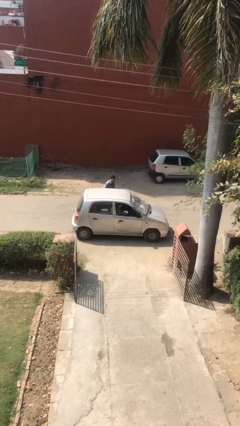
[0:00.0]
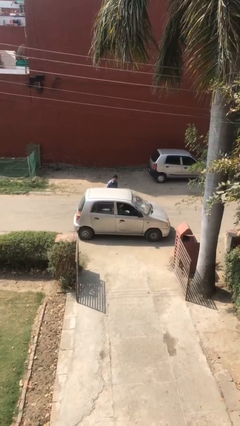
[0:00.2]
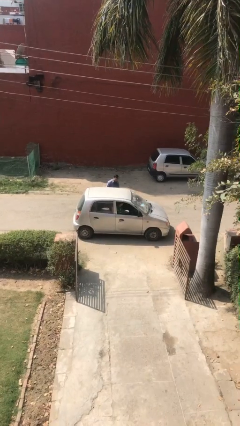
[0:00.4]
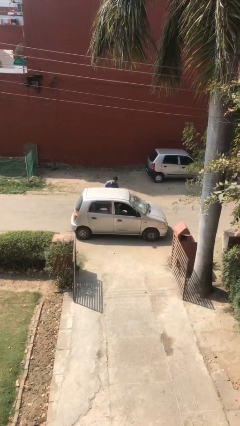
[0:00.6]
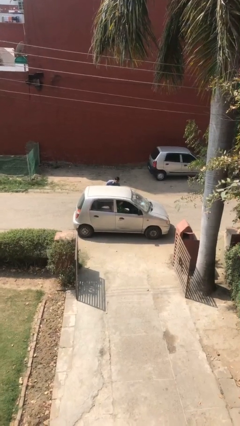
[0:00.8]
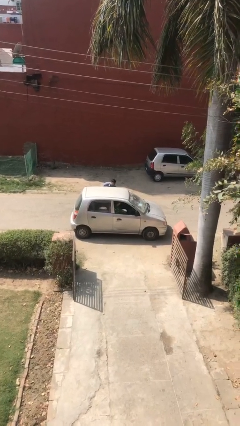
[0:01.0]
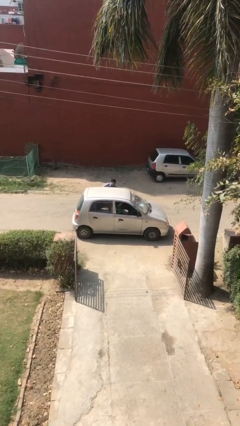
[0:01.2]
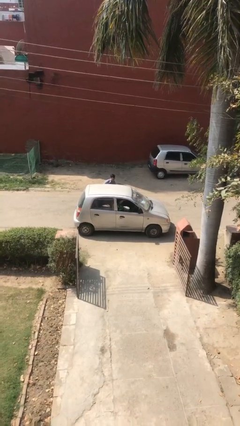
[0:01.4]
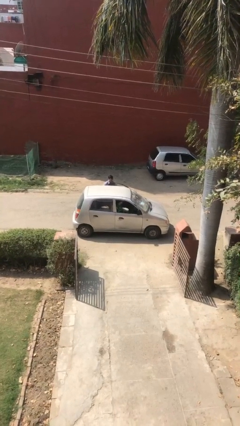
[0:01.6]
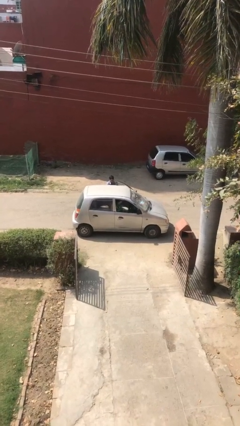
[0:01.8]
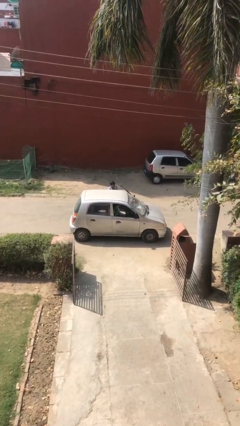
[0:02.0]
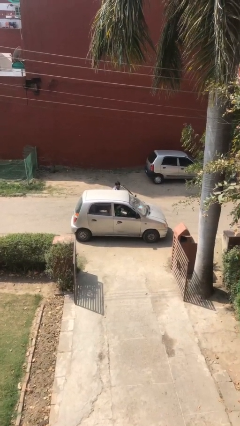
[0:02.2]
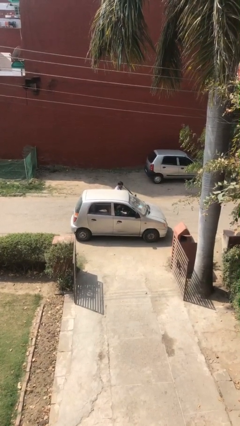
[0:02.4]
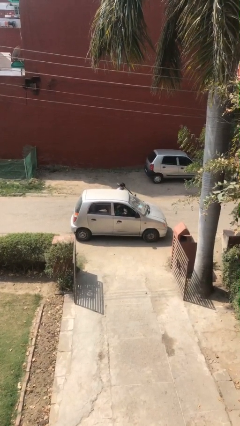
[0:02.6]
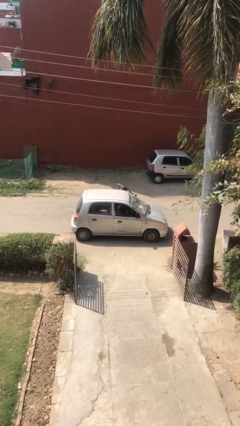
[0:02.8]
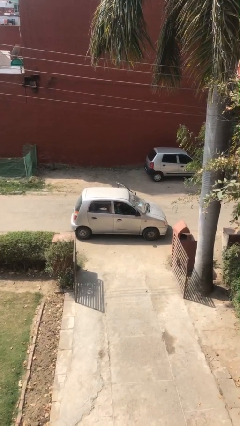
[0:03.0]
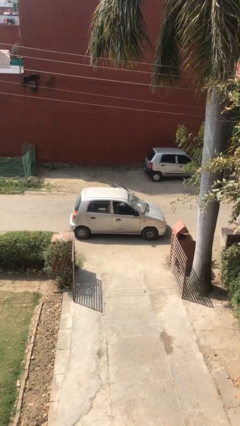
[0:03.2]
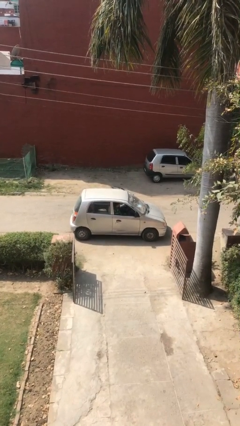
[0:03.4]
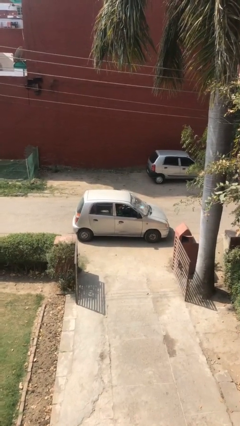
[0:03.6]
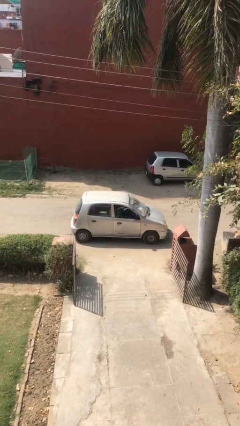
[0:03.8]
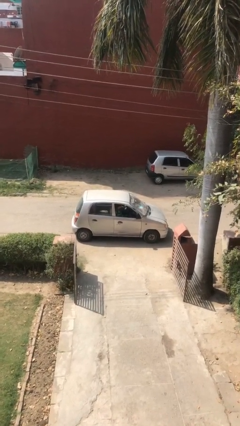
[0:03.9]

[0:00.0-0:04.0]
car picks up person

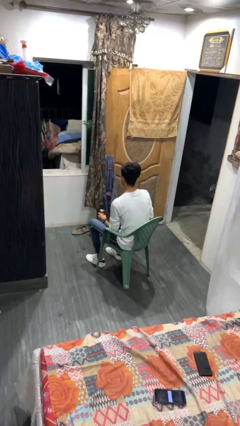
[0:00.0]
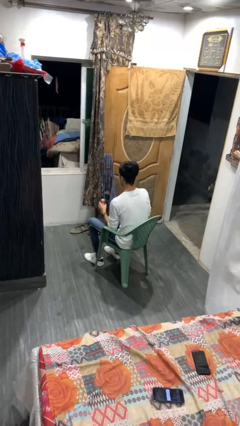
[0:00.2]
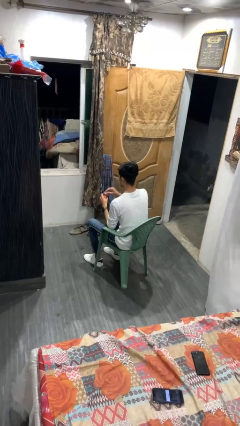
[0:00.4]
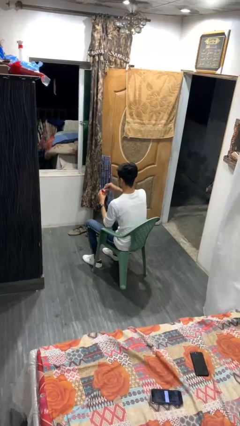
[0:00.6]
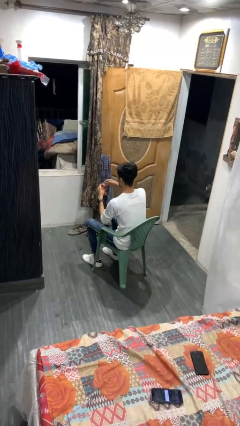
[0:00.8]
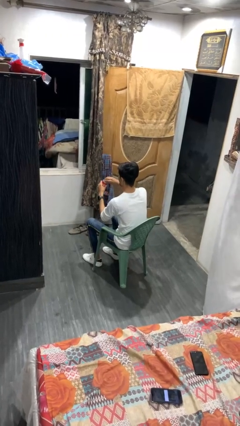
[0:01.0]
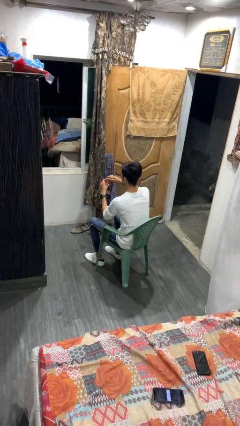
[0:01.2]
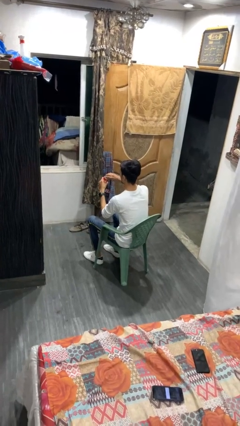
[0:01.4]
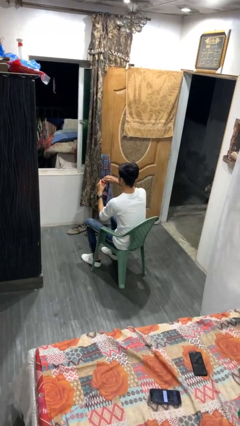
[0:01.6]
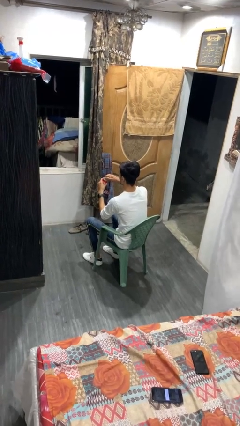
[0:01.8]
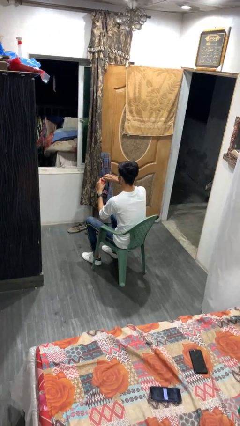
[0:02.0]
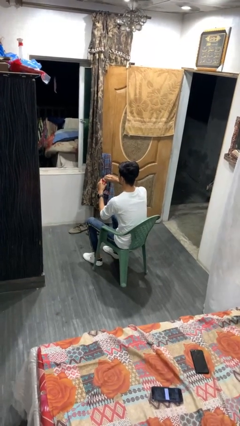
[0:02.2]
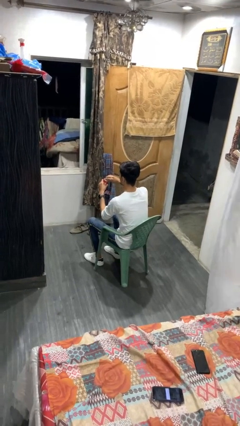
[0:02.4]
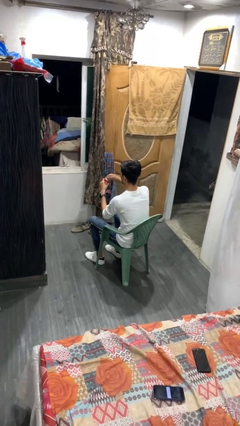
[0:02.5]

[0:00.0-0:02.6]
person opens beverage can

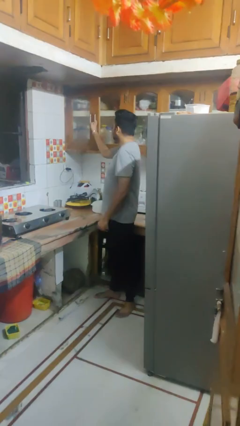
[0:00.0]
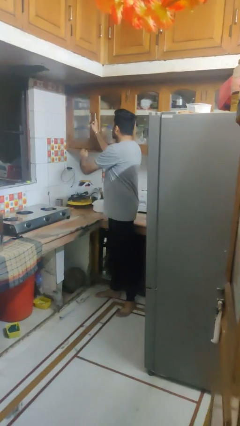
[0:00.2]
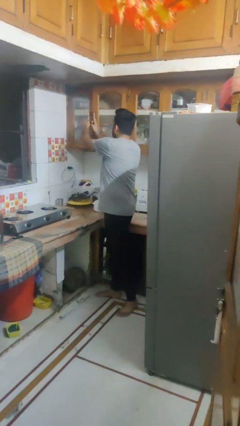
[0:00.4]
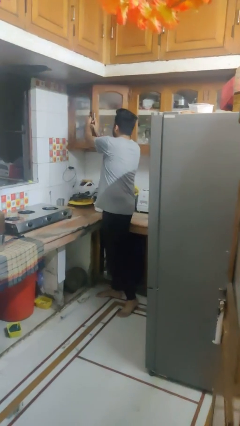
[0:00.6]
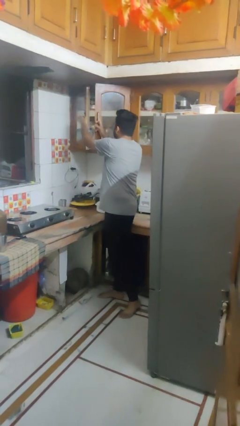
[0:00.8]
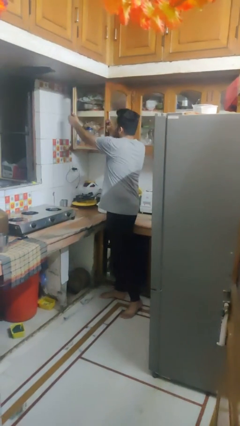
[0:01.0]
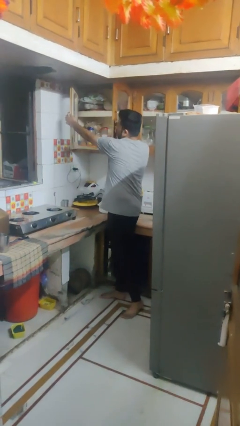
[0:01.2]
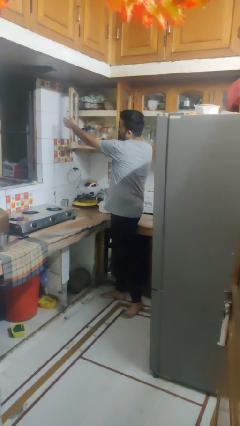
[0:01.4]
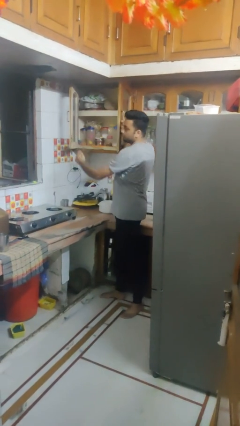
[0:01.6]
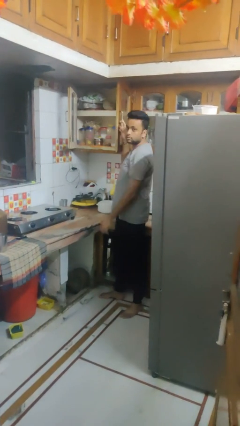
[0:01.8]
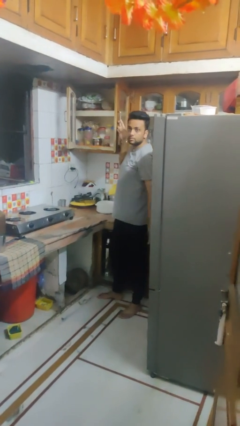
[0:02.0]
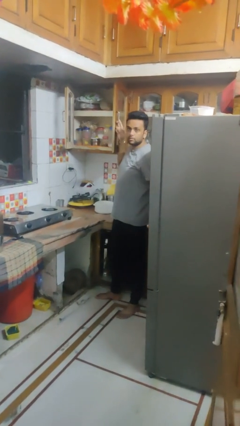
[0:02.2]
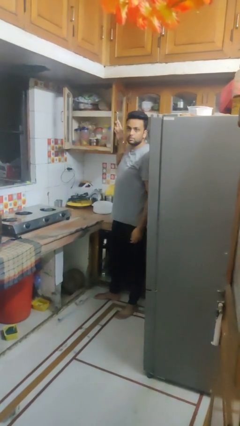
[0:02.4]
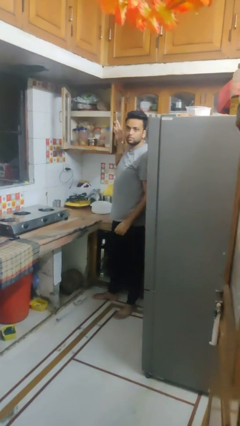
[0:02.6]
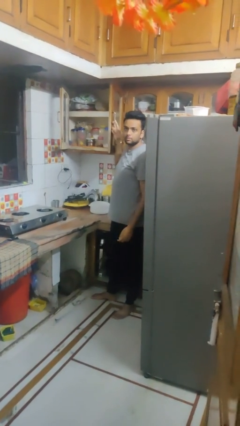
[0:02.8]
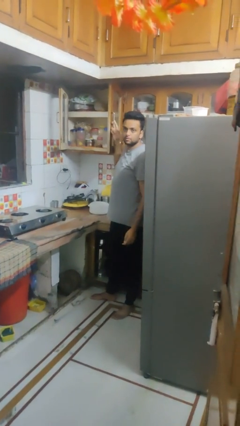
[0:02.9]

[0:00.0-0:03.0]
person opens cabinet

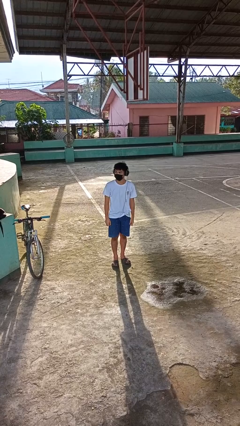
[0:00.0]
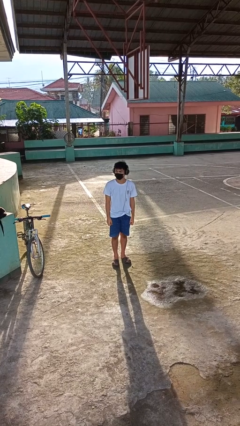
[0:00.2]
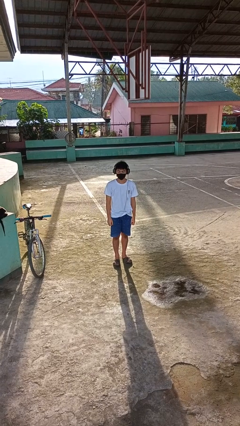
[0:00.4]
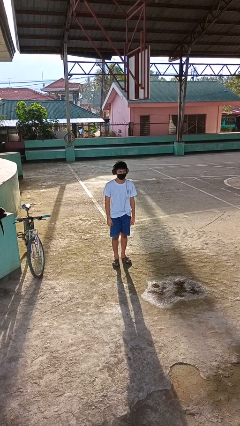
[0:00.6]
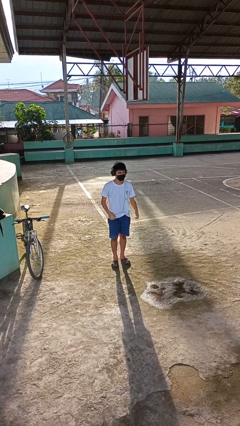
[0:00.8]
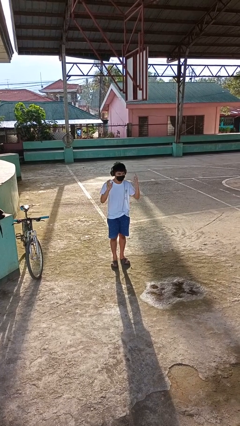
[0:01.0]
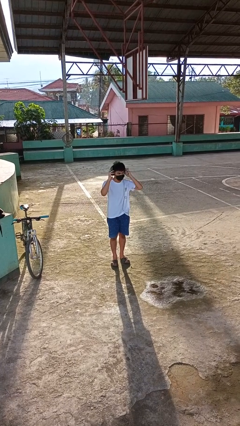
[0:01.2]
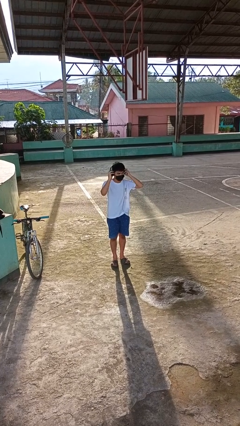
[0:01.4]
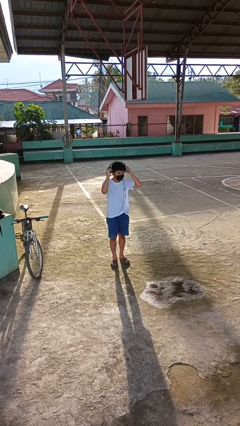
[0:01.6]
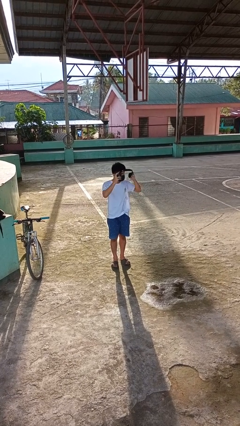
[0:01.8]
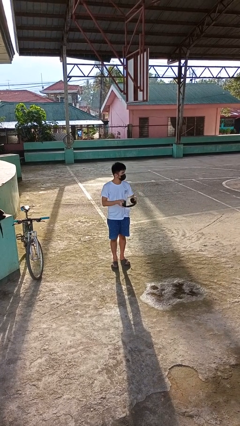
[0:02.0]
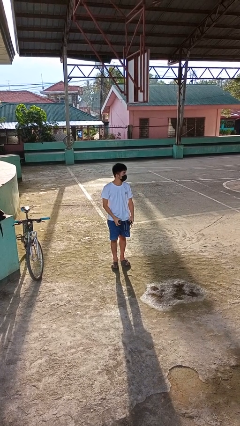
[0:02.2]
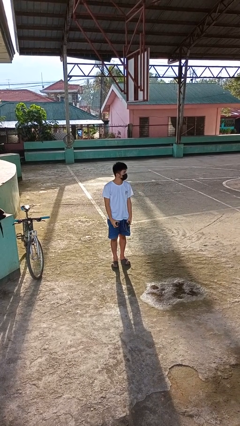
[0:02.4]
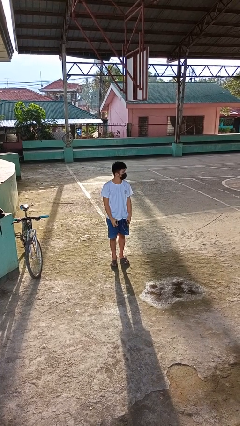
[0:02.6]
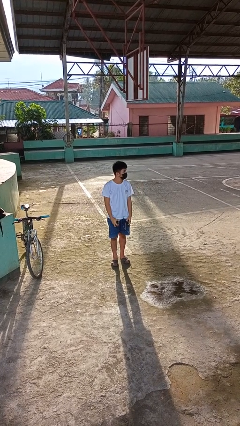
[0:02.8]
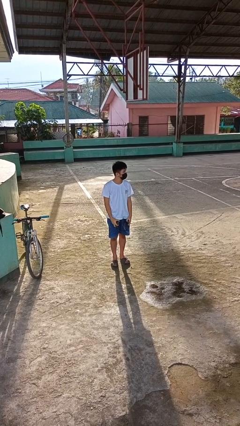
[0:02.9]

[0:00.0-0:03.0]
person takes off headphones

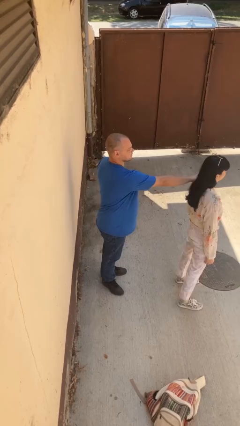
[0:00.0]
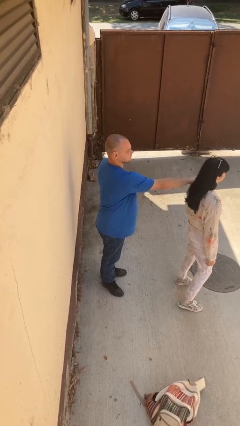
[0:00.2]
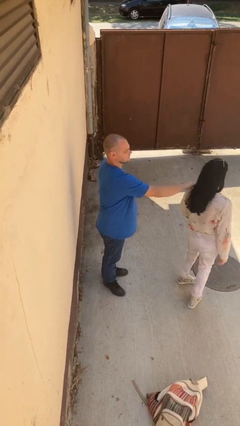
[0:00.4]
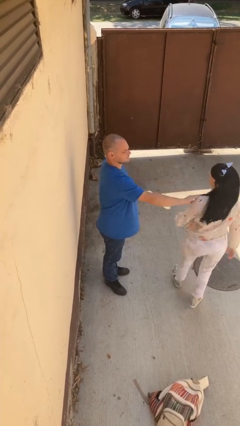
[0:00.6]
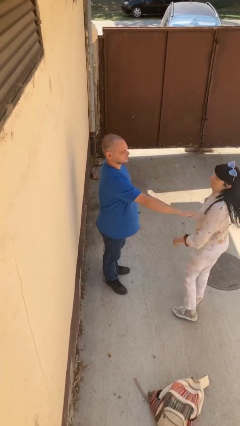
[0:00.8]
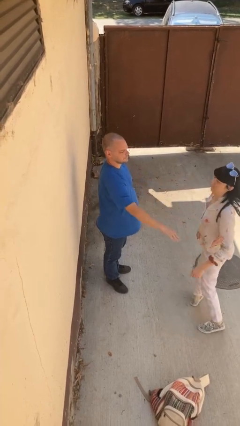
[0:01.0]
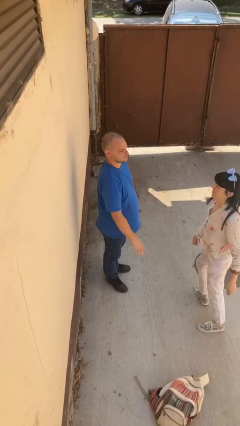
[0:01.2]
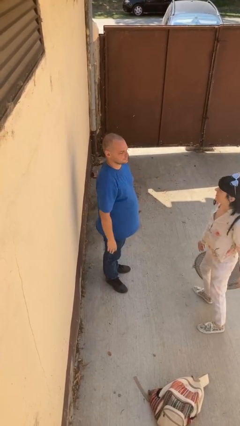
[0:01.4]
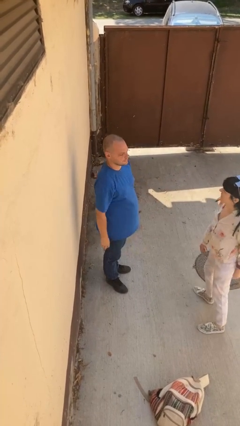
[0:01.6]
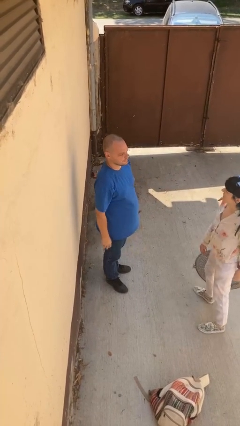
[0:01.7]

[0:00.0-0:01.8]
person spins person around

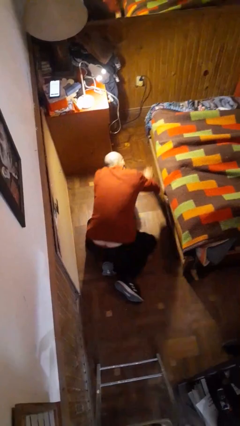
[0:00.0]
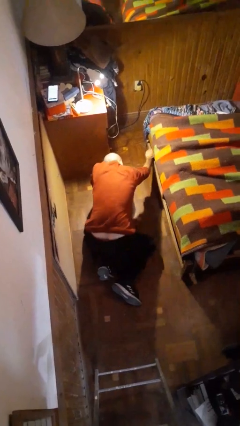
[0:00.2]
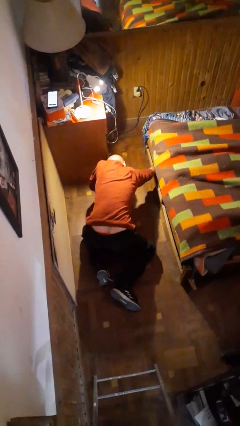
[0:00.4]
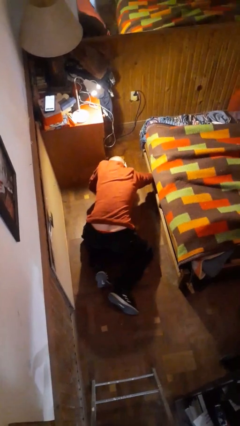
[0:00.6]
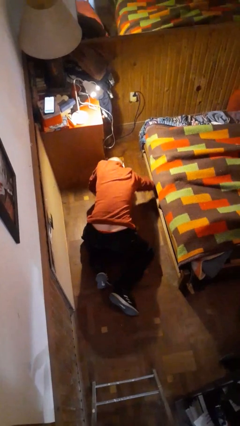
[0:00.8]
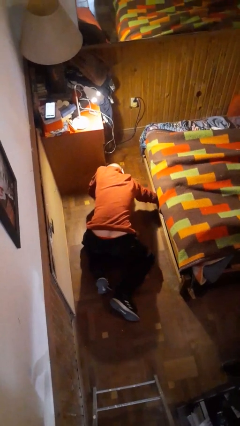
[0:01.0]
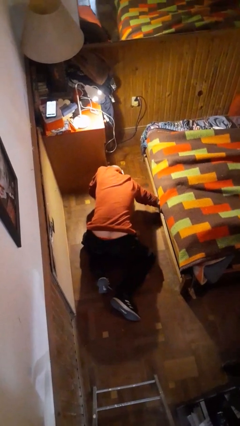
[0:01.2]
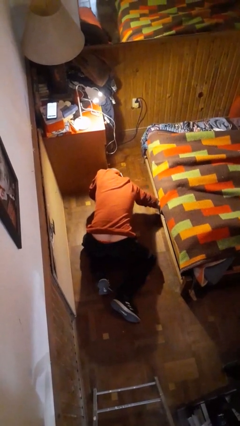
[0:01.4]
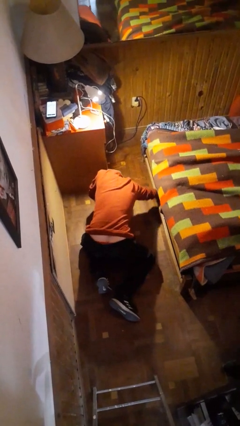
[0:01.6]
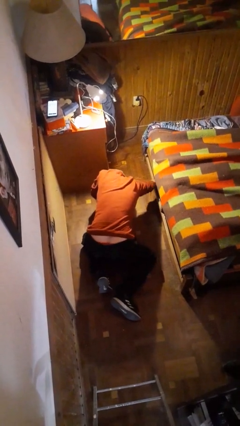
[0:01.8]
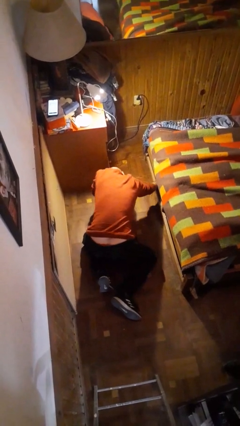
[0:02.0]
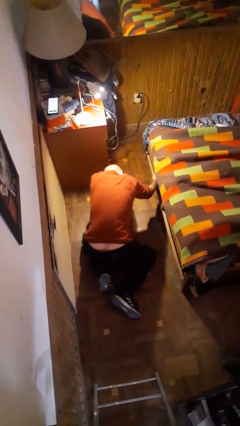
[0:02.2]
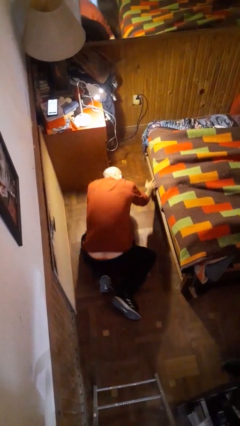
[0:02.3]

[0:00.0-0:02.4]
person searches under bed

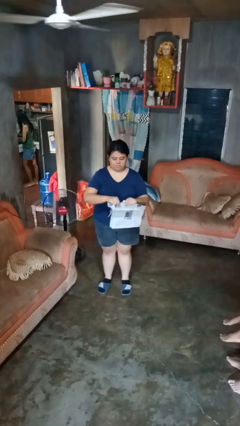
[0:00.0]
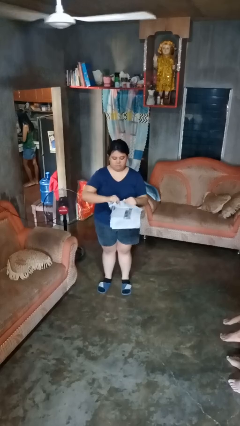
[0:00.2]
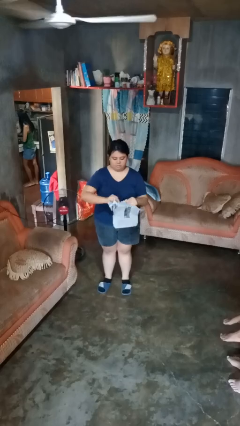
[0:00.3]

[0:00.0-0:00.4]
person tears paper
